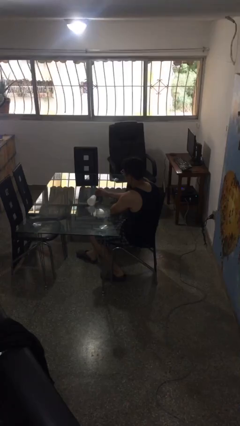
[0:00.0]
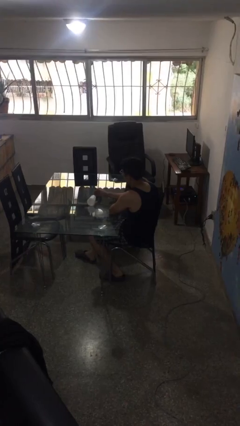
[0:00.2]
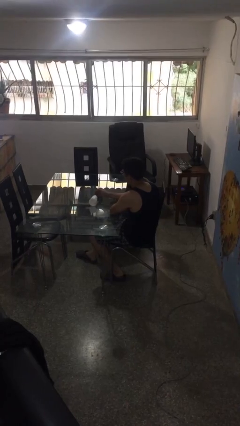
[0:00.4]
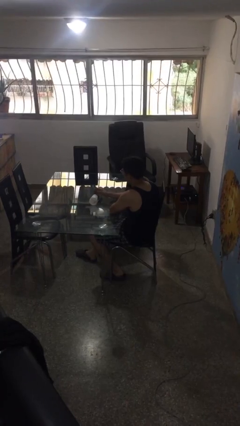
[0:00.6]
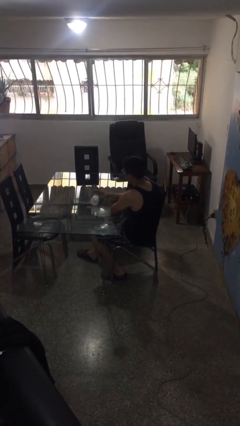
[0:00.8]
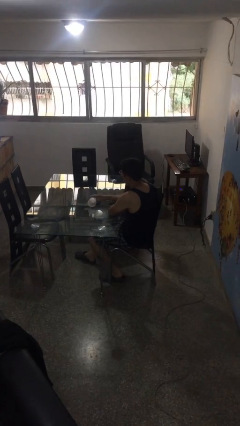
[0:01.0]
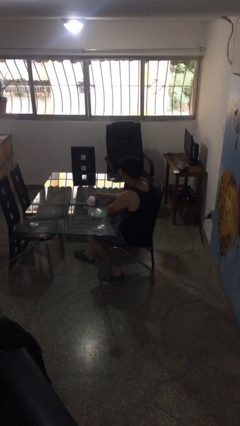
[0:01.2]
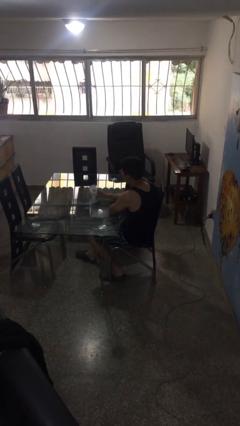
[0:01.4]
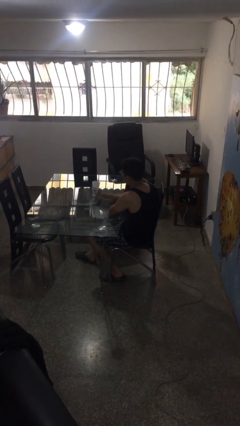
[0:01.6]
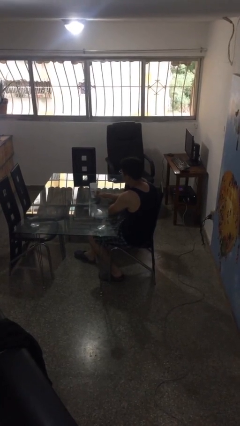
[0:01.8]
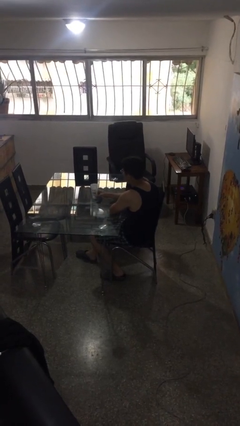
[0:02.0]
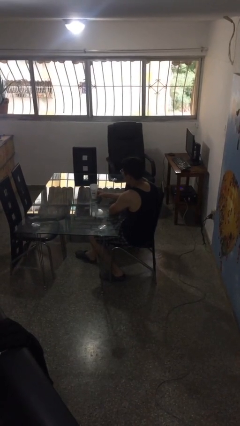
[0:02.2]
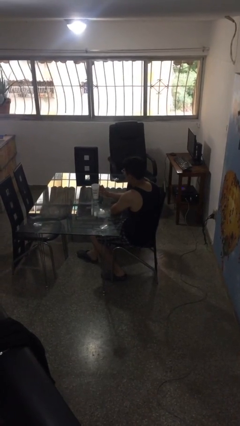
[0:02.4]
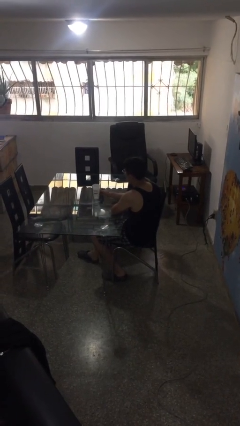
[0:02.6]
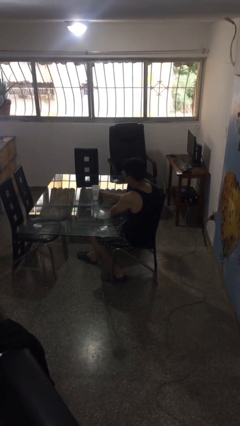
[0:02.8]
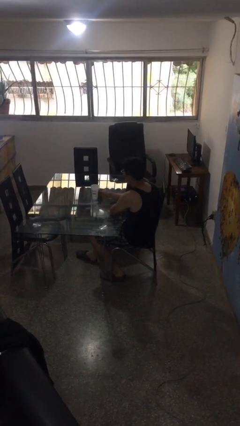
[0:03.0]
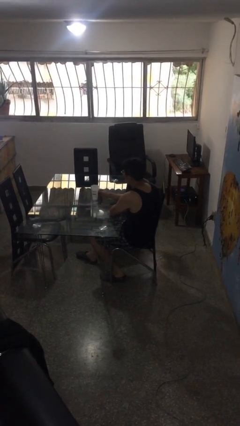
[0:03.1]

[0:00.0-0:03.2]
person sets upright glass

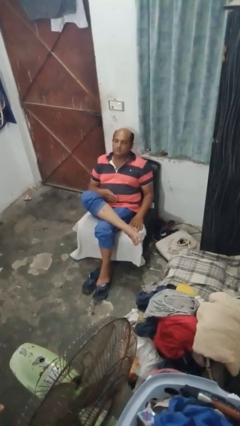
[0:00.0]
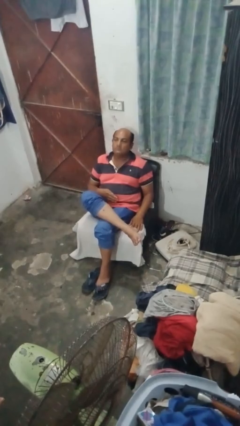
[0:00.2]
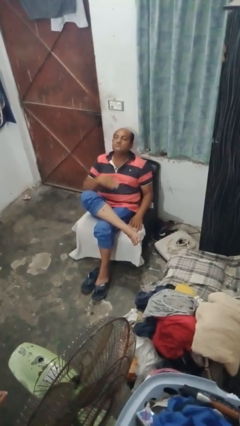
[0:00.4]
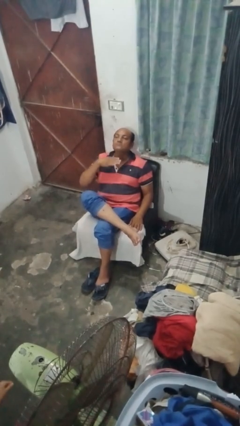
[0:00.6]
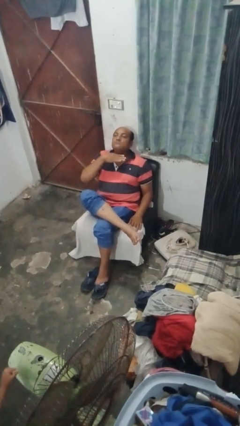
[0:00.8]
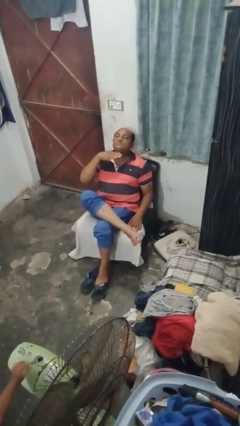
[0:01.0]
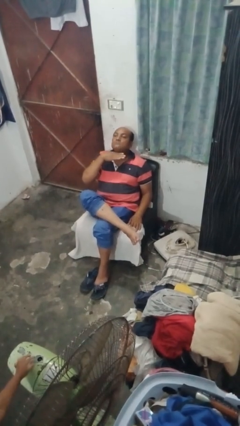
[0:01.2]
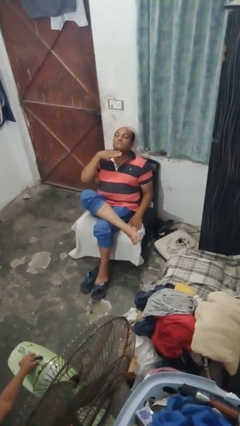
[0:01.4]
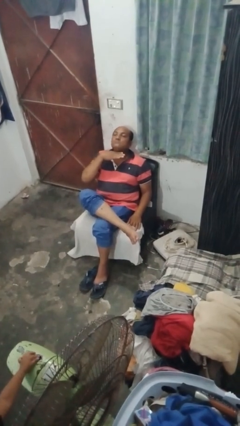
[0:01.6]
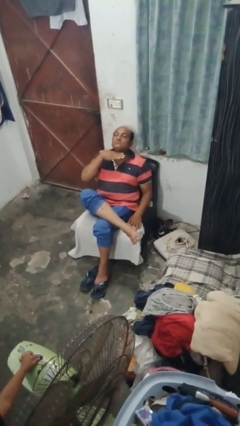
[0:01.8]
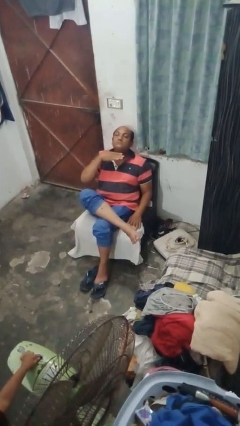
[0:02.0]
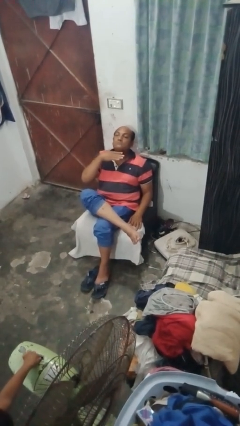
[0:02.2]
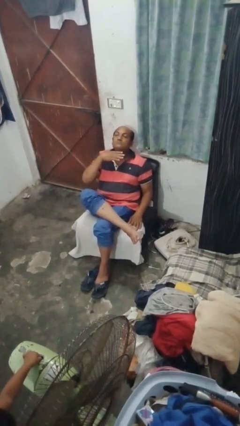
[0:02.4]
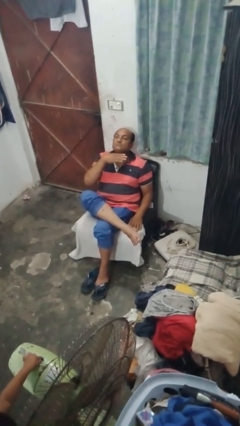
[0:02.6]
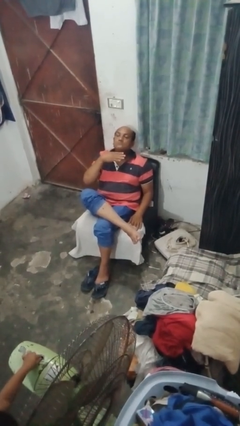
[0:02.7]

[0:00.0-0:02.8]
person gestures cut

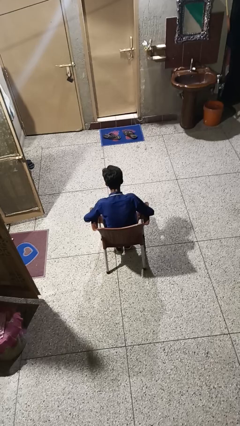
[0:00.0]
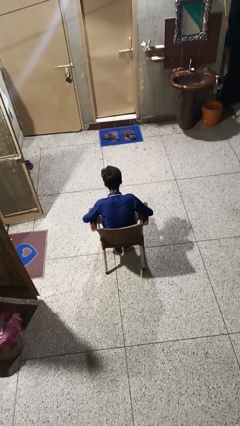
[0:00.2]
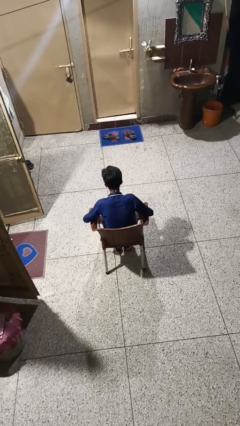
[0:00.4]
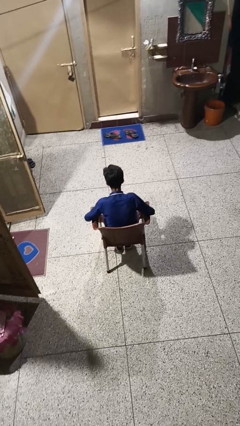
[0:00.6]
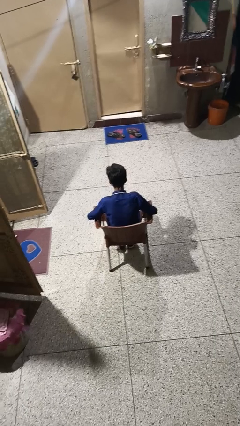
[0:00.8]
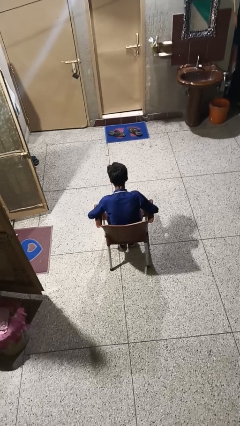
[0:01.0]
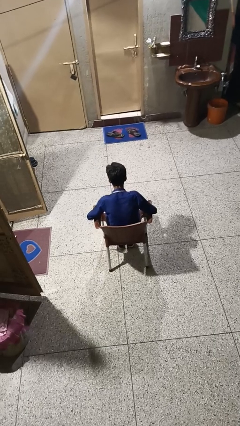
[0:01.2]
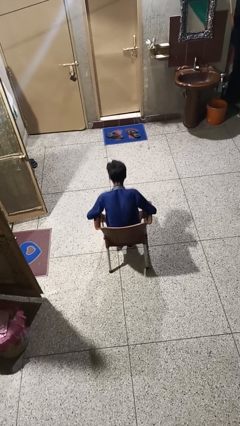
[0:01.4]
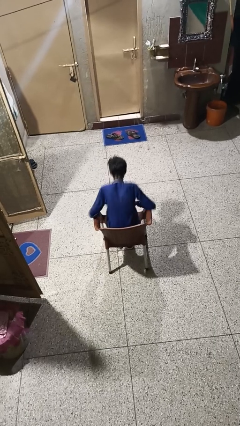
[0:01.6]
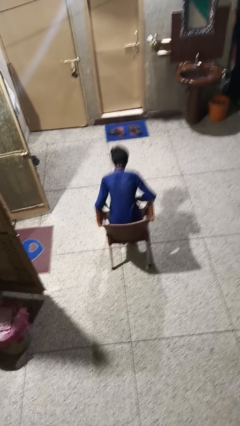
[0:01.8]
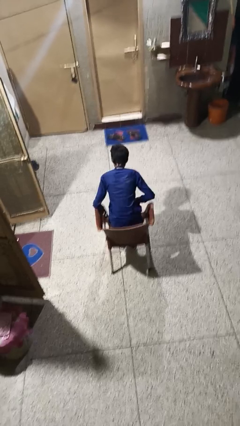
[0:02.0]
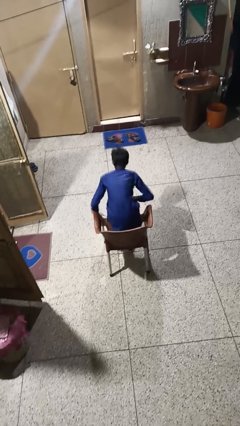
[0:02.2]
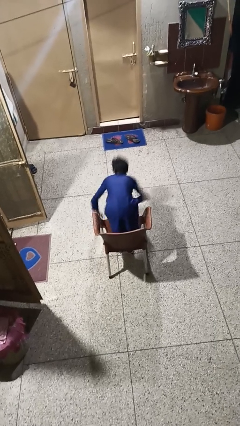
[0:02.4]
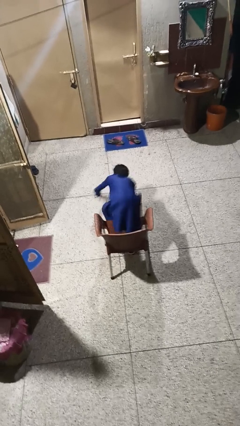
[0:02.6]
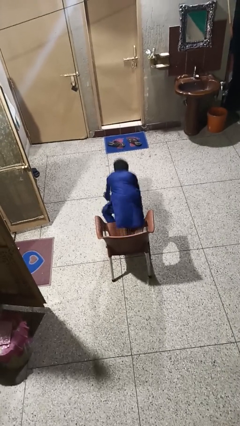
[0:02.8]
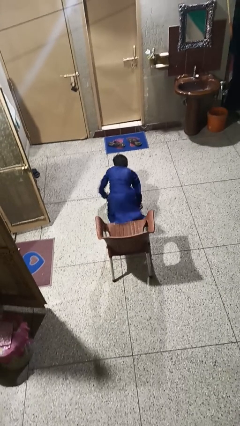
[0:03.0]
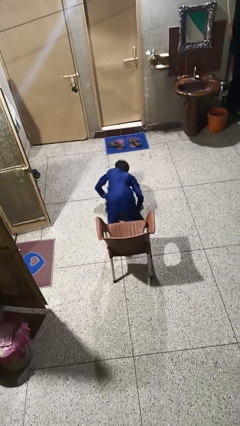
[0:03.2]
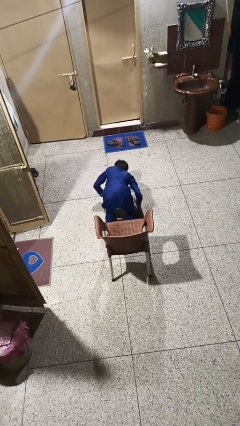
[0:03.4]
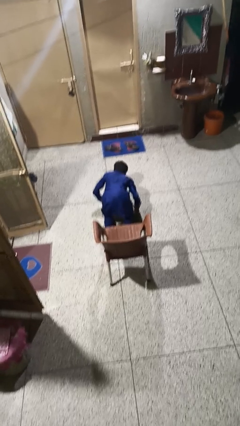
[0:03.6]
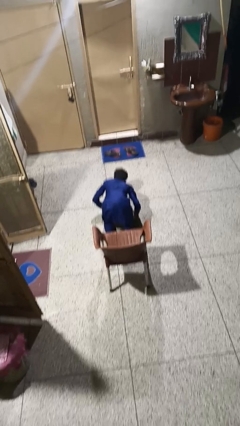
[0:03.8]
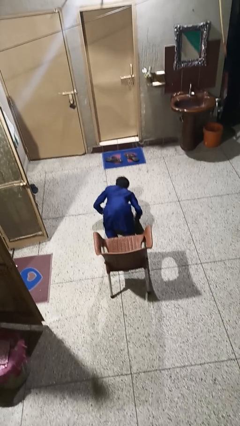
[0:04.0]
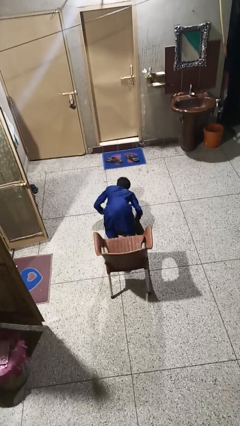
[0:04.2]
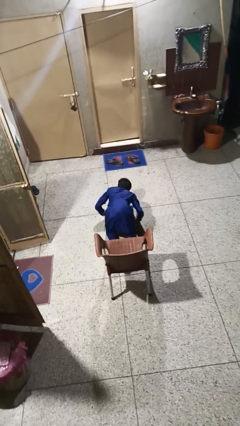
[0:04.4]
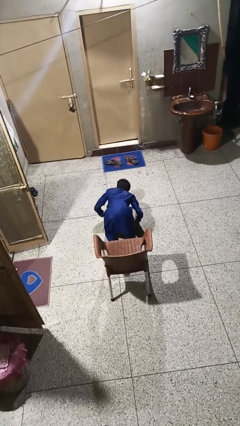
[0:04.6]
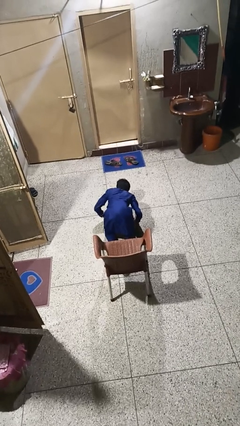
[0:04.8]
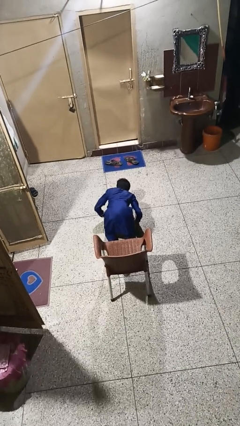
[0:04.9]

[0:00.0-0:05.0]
person falls from chair

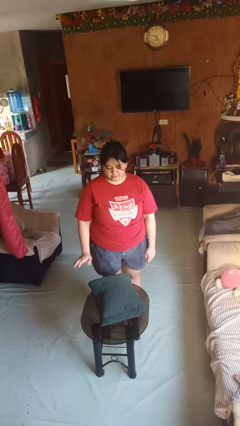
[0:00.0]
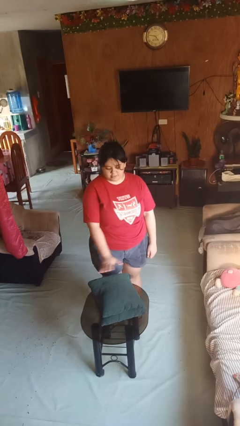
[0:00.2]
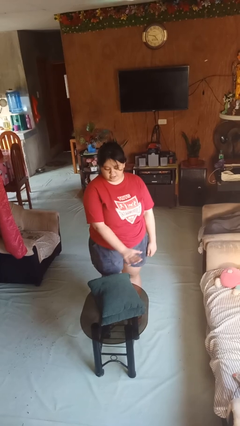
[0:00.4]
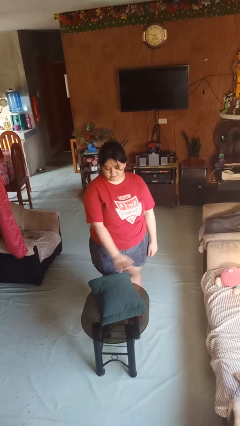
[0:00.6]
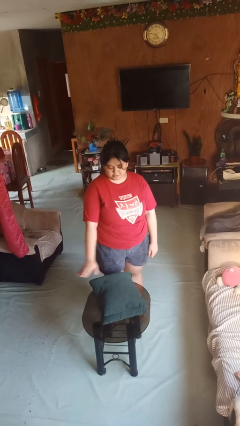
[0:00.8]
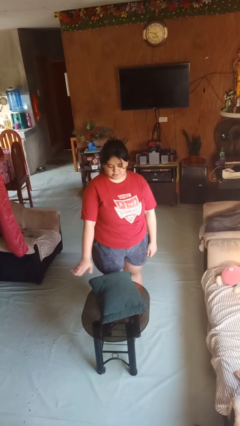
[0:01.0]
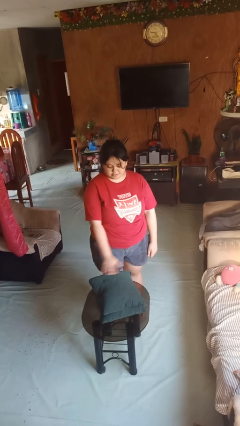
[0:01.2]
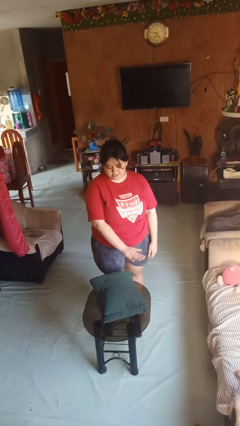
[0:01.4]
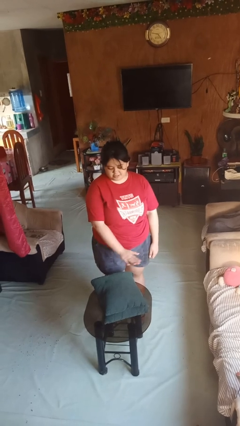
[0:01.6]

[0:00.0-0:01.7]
person waves hand over object

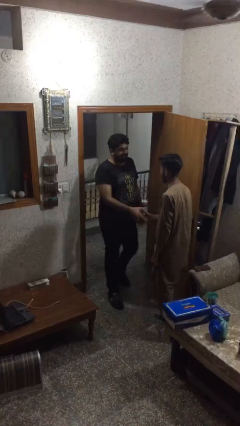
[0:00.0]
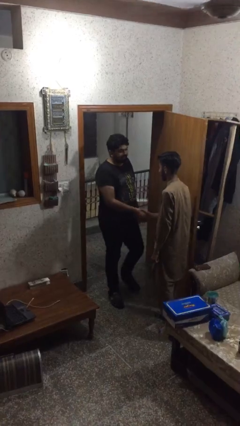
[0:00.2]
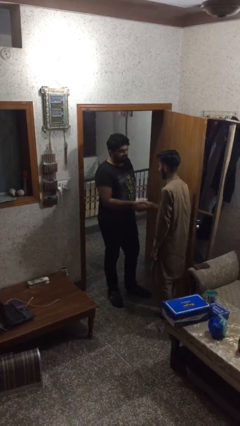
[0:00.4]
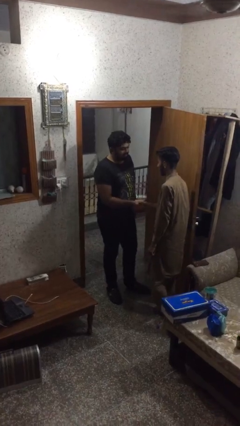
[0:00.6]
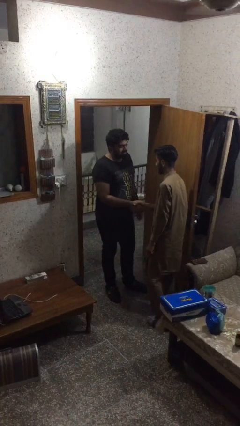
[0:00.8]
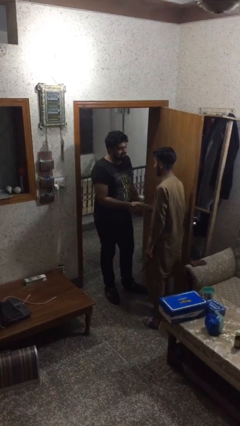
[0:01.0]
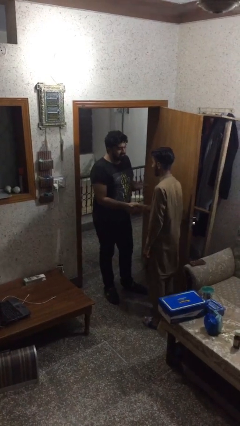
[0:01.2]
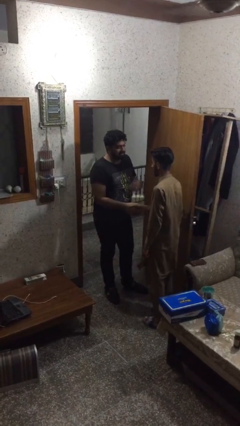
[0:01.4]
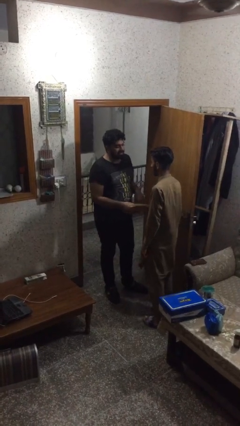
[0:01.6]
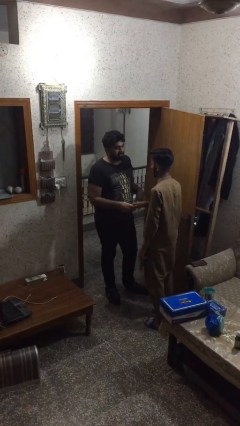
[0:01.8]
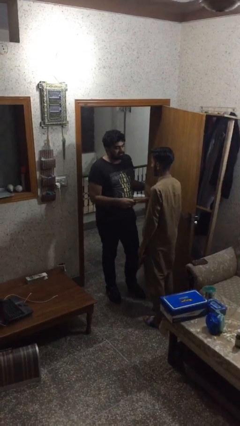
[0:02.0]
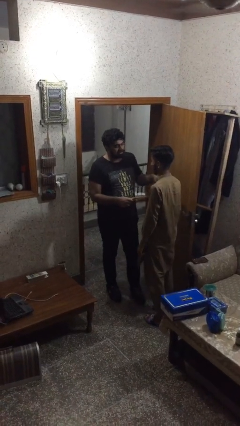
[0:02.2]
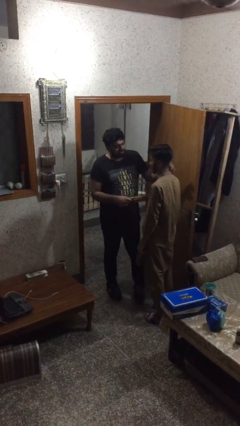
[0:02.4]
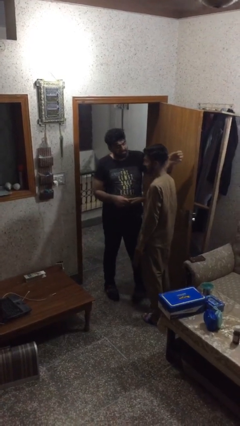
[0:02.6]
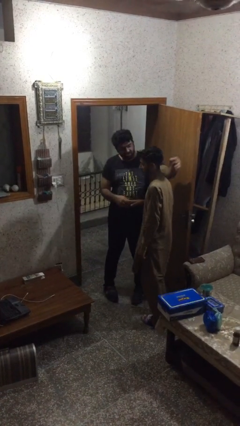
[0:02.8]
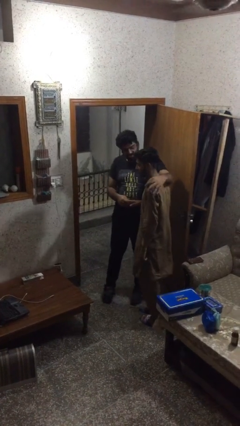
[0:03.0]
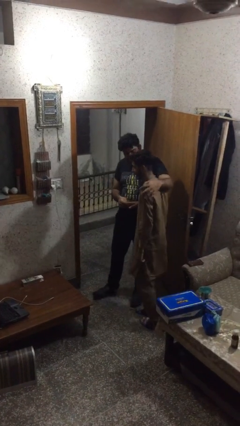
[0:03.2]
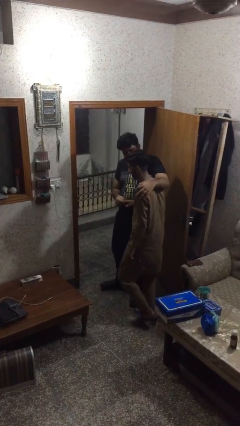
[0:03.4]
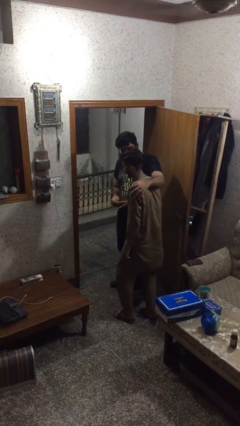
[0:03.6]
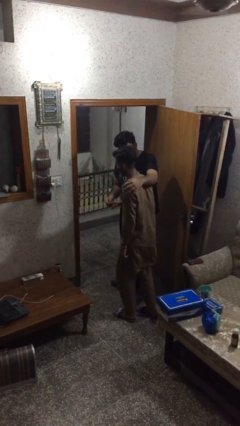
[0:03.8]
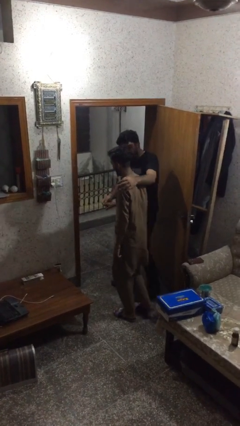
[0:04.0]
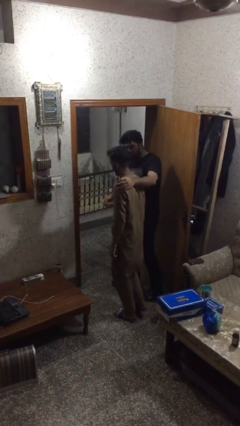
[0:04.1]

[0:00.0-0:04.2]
person shakes hand

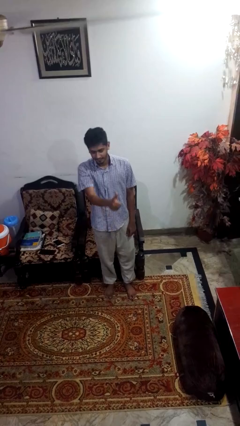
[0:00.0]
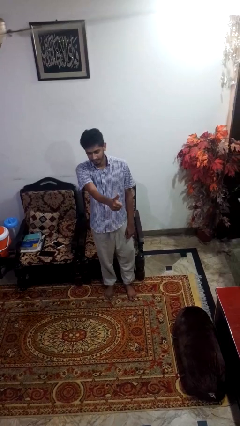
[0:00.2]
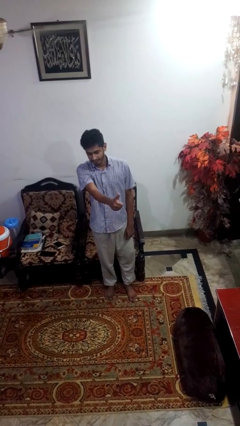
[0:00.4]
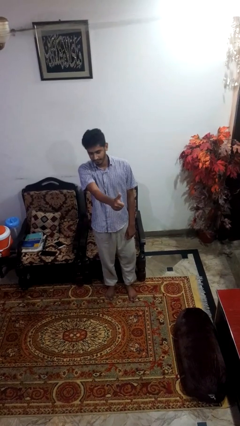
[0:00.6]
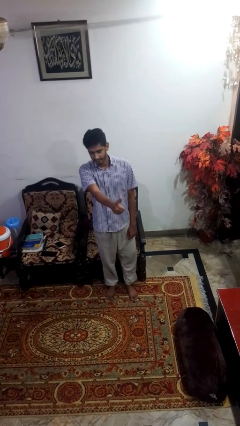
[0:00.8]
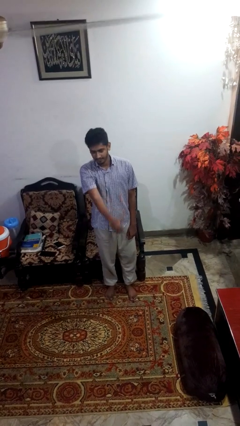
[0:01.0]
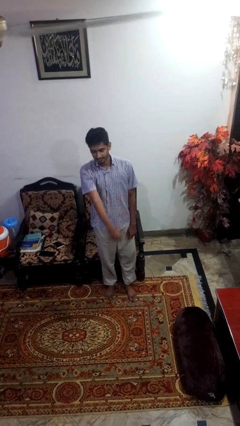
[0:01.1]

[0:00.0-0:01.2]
person gestures thumbs up
